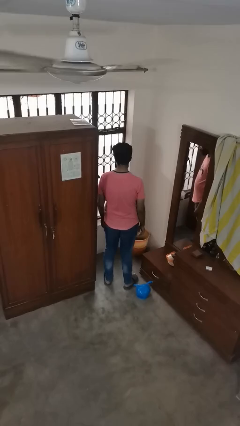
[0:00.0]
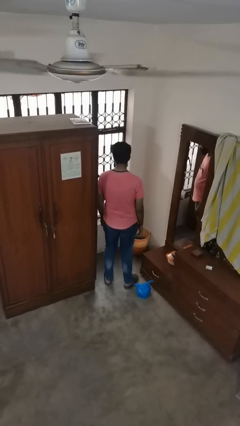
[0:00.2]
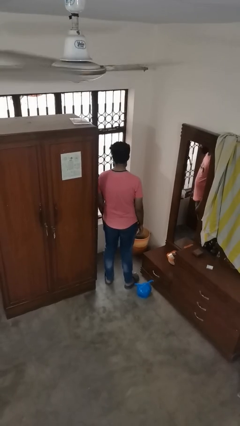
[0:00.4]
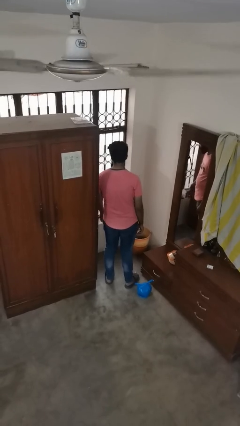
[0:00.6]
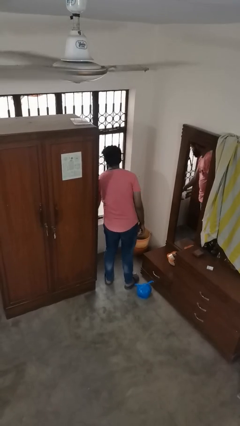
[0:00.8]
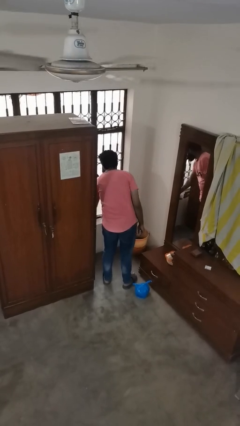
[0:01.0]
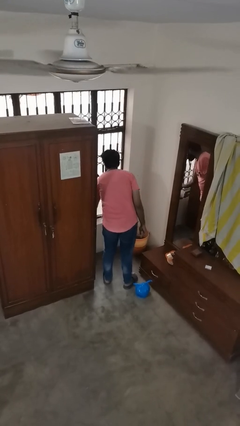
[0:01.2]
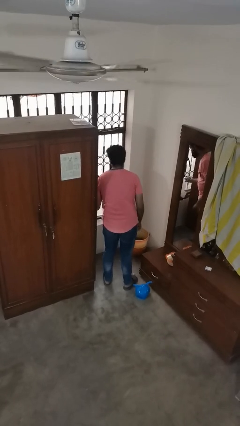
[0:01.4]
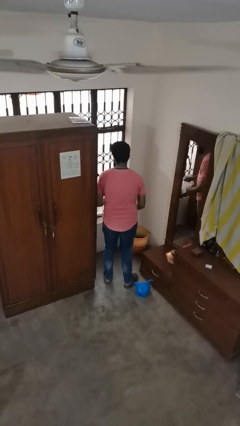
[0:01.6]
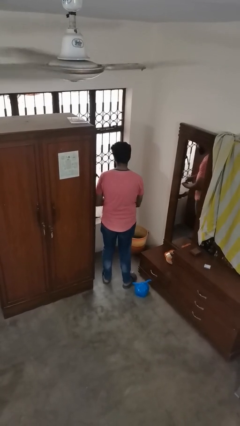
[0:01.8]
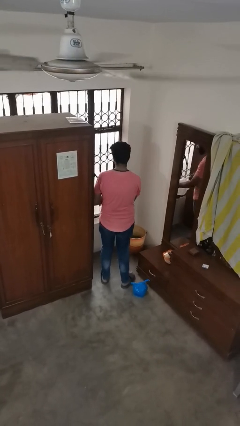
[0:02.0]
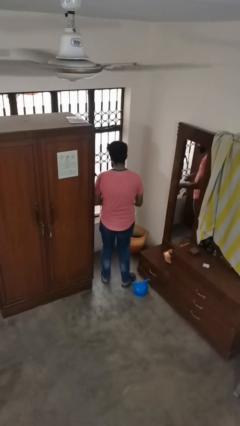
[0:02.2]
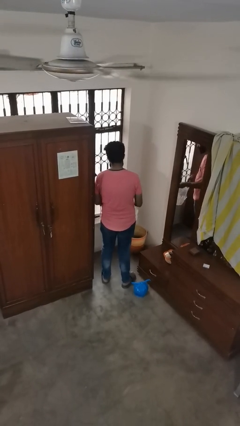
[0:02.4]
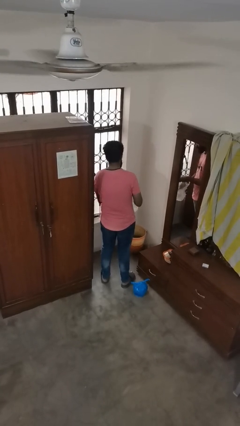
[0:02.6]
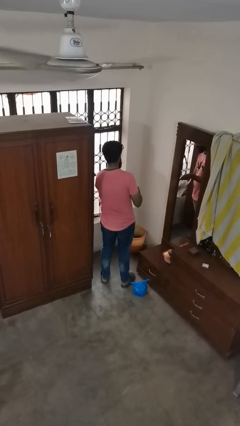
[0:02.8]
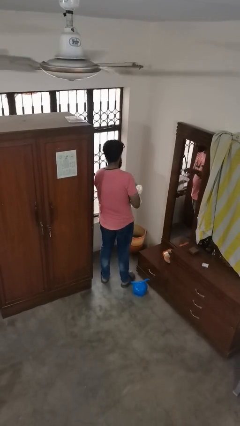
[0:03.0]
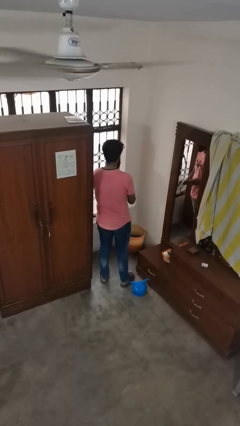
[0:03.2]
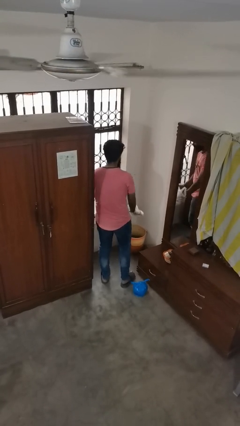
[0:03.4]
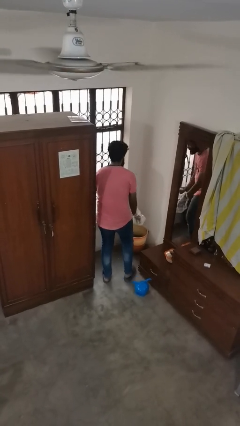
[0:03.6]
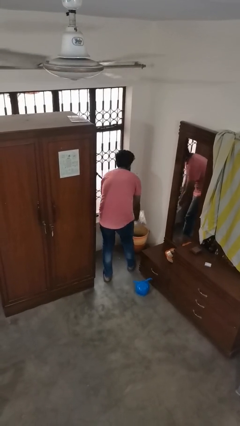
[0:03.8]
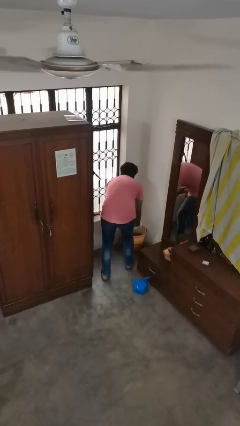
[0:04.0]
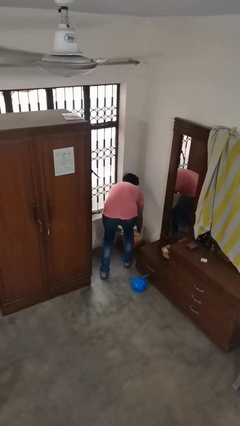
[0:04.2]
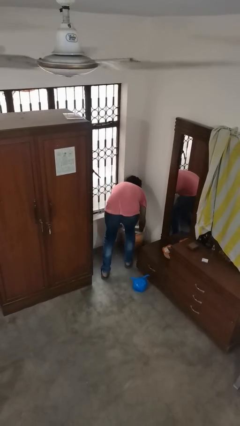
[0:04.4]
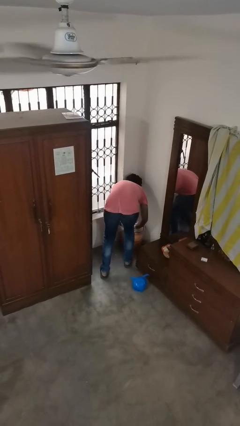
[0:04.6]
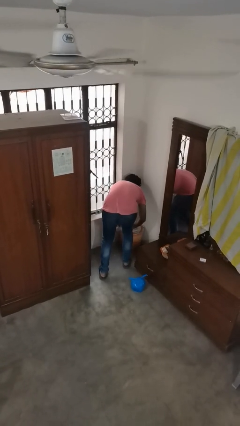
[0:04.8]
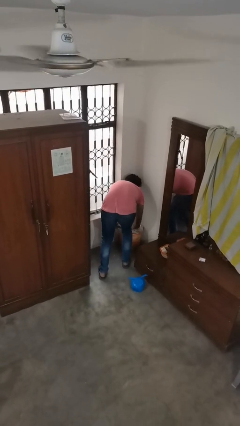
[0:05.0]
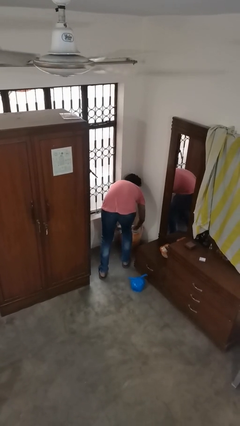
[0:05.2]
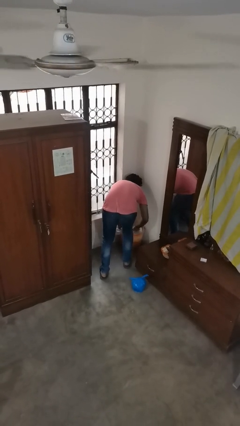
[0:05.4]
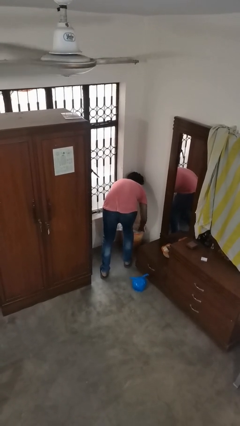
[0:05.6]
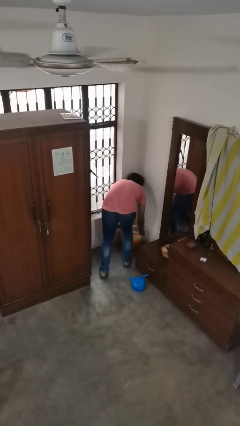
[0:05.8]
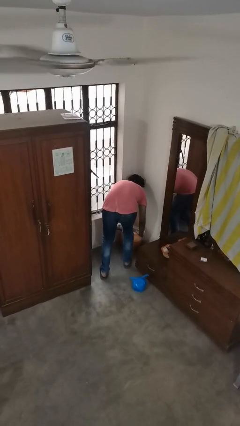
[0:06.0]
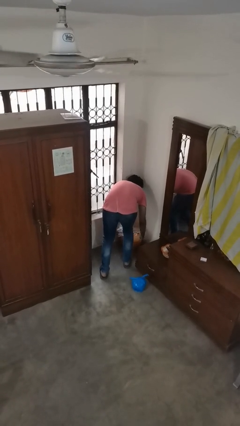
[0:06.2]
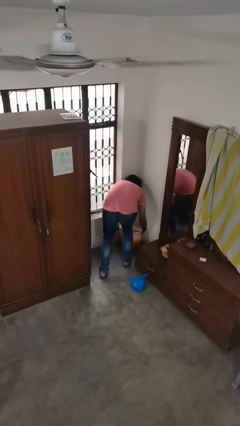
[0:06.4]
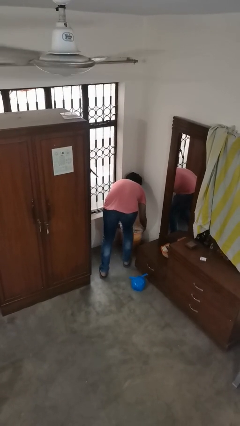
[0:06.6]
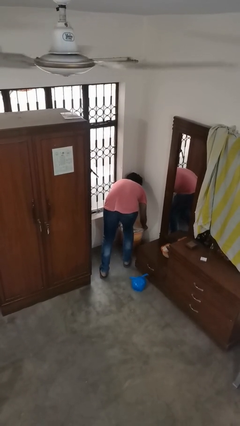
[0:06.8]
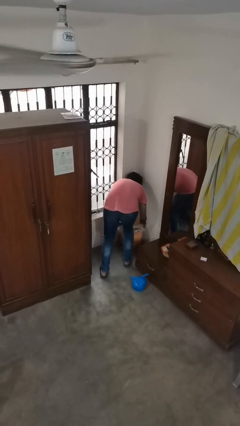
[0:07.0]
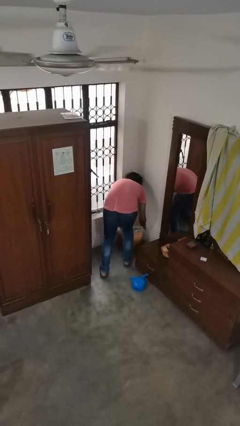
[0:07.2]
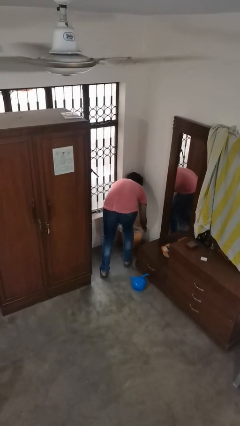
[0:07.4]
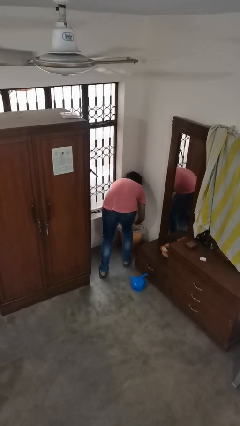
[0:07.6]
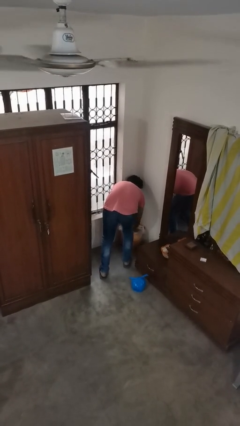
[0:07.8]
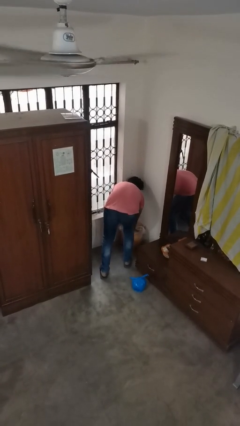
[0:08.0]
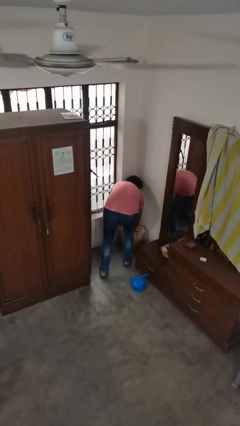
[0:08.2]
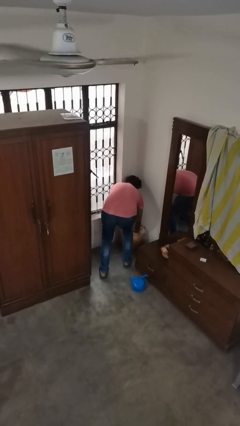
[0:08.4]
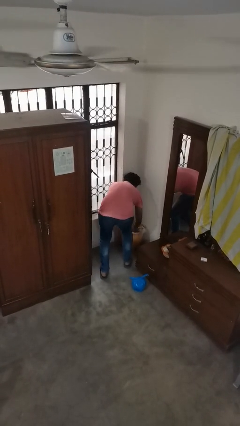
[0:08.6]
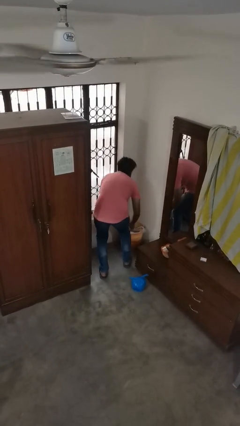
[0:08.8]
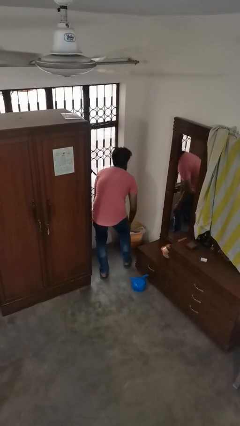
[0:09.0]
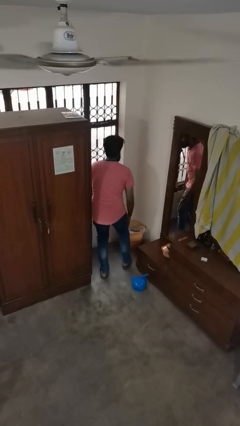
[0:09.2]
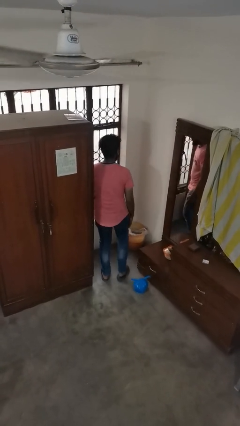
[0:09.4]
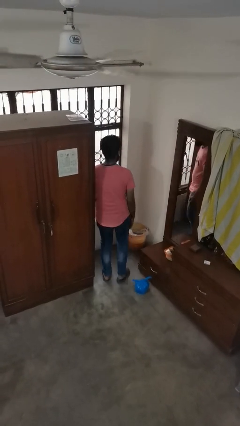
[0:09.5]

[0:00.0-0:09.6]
person inserts trashbag into trashcan

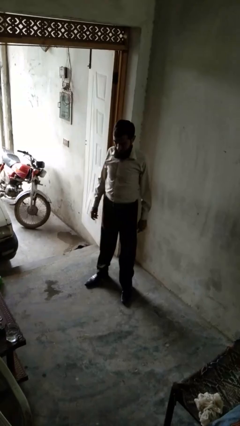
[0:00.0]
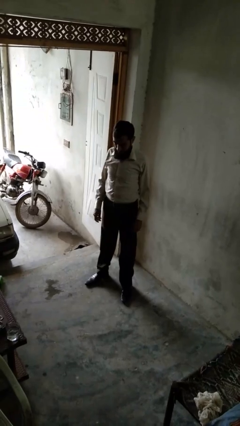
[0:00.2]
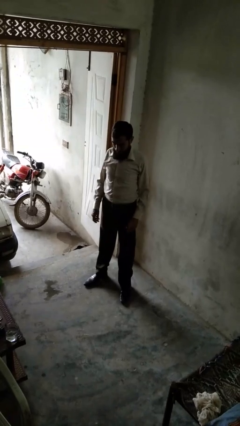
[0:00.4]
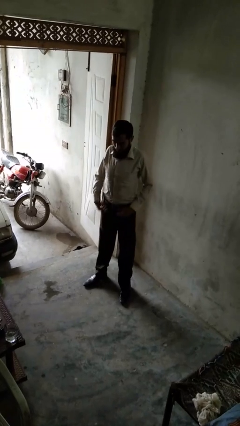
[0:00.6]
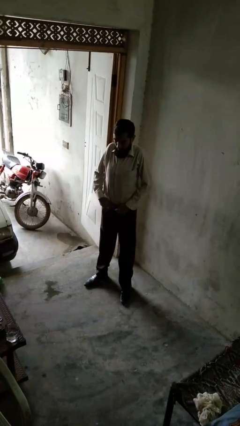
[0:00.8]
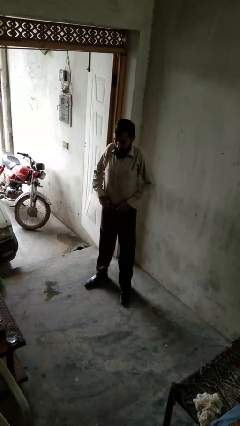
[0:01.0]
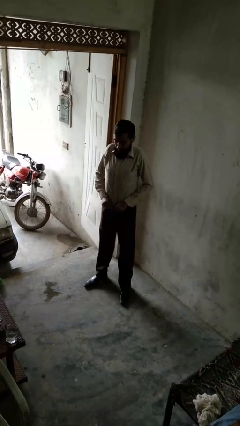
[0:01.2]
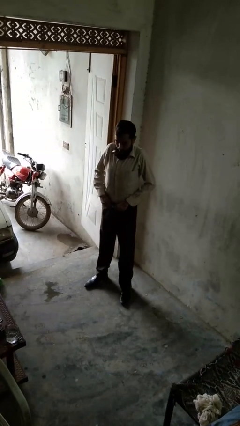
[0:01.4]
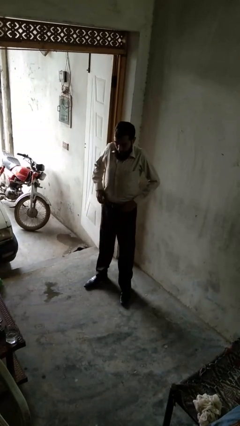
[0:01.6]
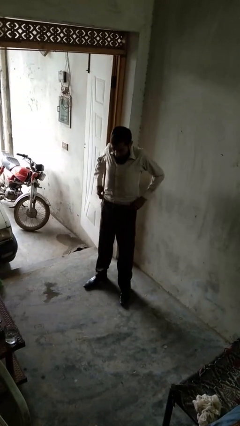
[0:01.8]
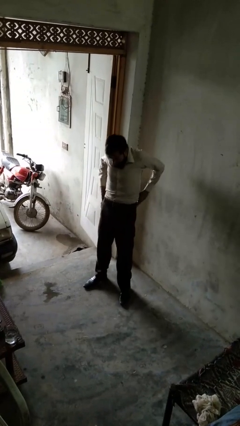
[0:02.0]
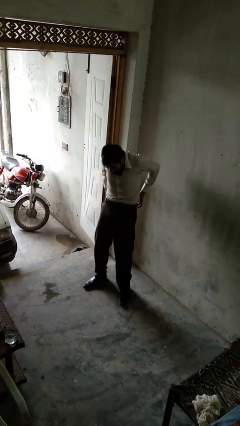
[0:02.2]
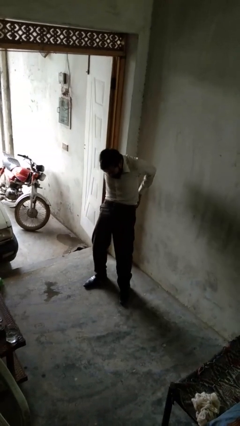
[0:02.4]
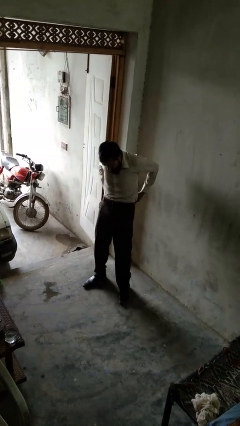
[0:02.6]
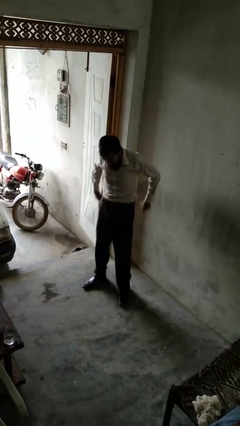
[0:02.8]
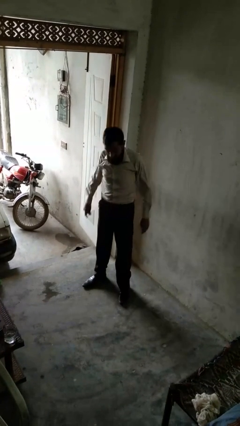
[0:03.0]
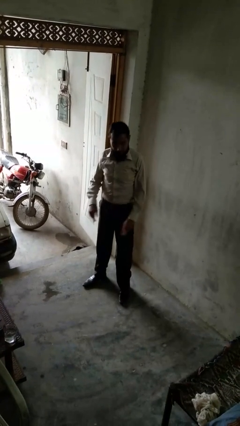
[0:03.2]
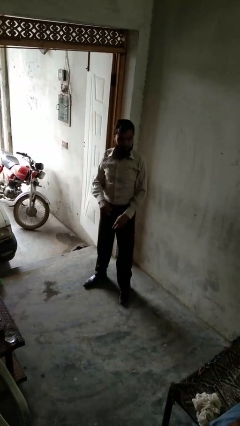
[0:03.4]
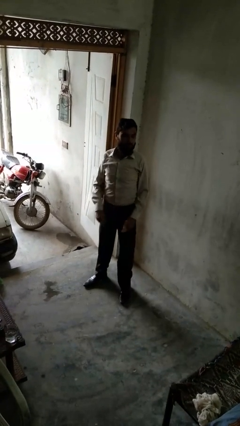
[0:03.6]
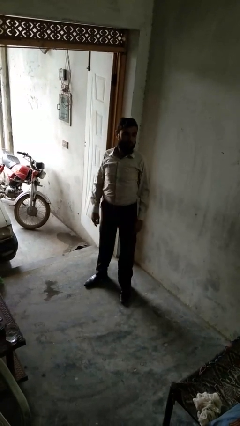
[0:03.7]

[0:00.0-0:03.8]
person hikes up pants

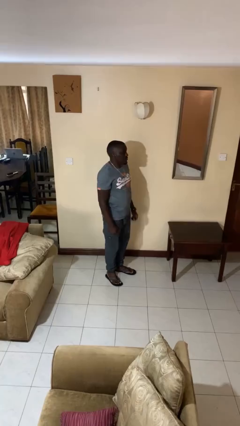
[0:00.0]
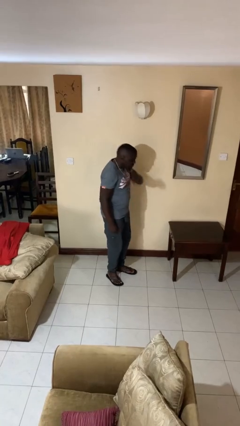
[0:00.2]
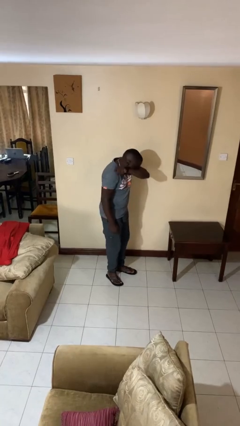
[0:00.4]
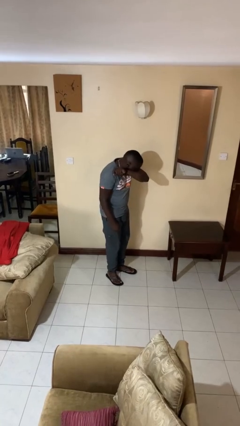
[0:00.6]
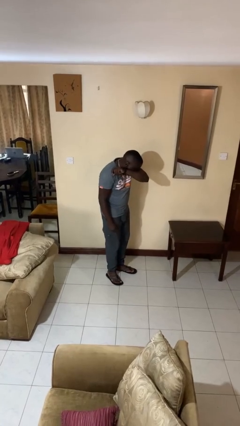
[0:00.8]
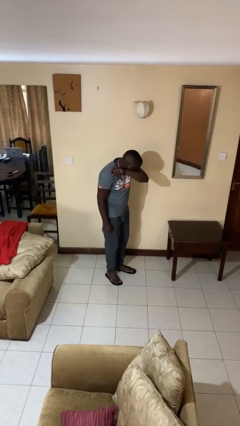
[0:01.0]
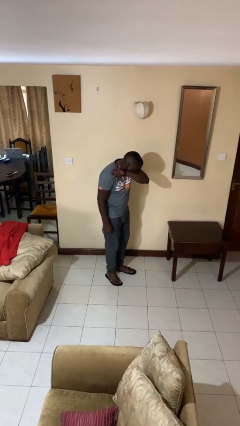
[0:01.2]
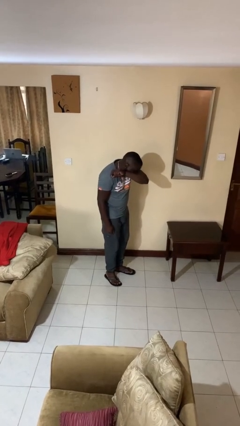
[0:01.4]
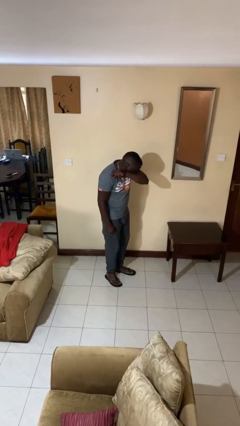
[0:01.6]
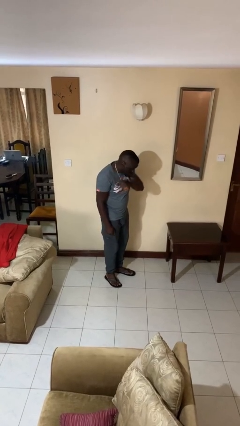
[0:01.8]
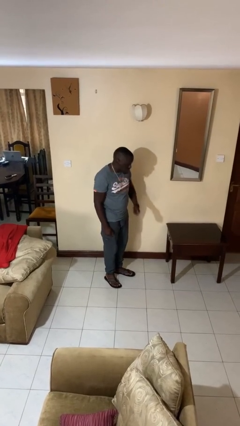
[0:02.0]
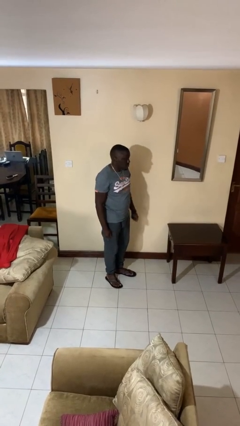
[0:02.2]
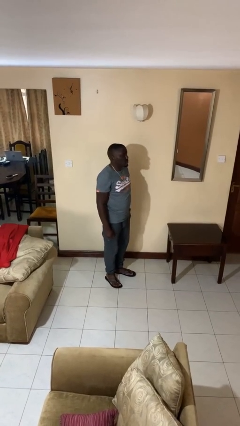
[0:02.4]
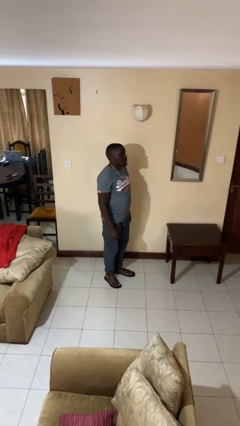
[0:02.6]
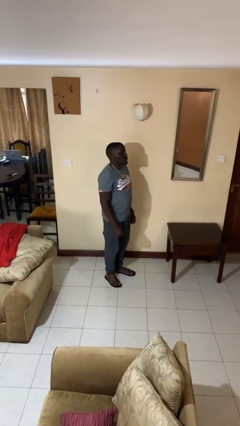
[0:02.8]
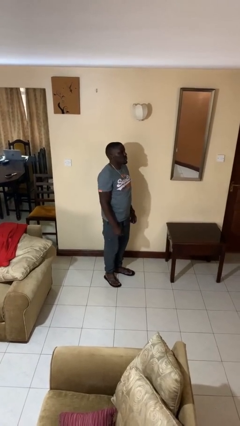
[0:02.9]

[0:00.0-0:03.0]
person sneezes into arm

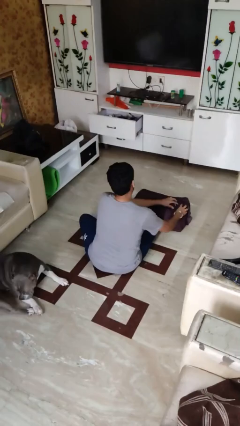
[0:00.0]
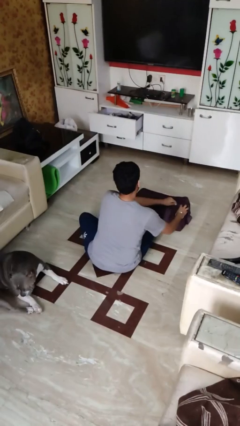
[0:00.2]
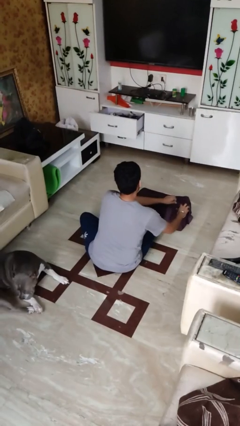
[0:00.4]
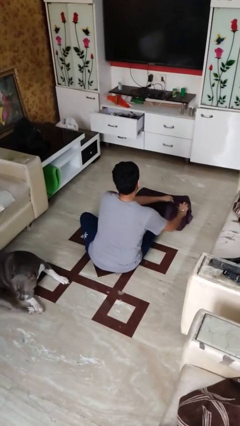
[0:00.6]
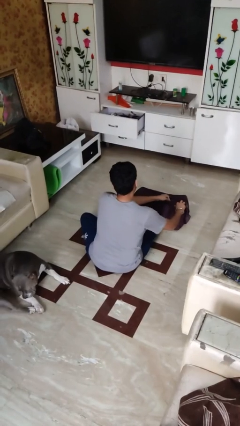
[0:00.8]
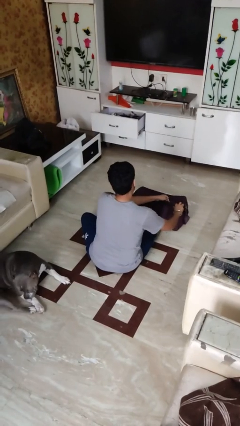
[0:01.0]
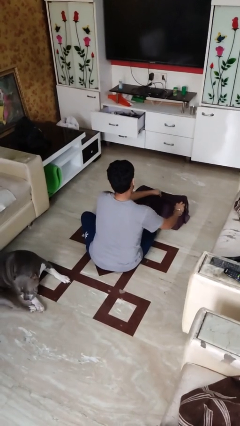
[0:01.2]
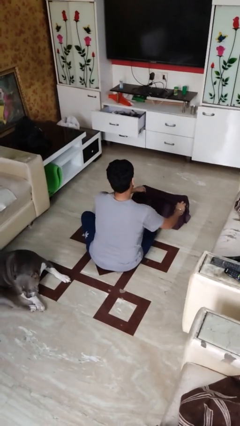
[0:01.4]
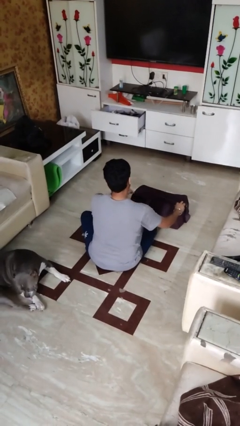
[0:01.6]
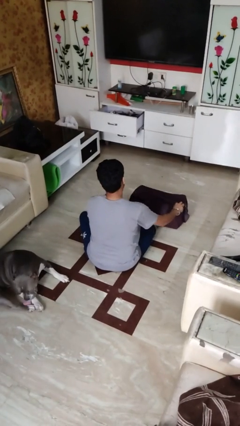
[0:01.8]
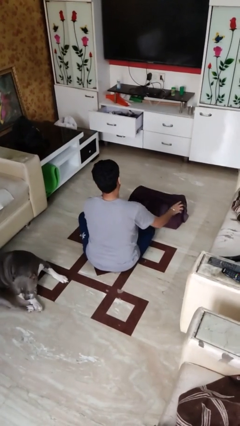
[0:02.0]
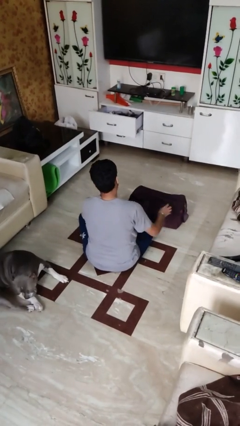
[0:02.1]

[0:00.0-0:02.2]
person closes suitcase
